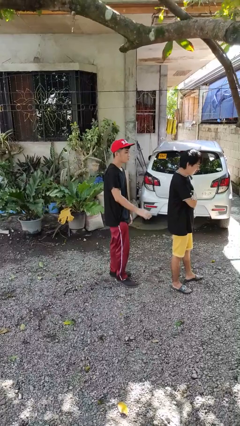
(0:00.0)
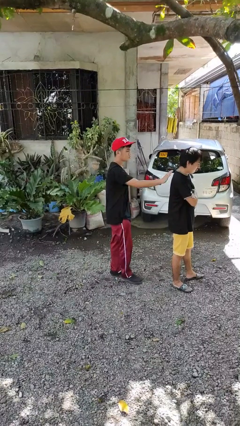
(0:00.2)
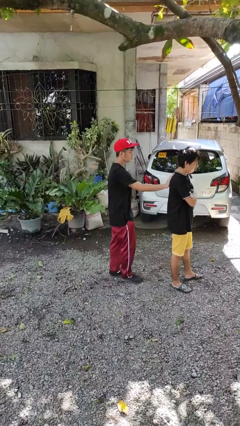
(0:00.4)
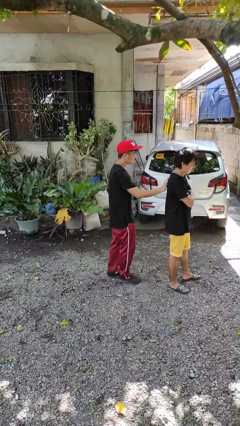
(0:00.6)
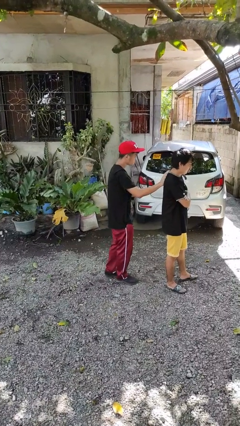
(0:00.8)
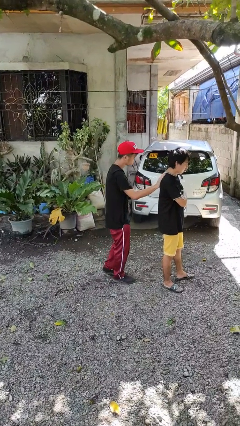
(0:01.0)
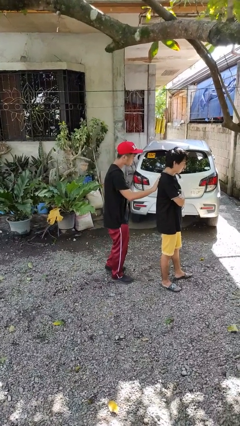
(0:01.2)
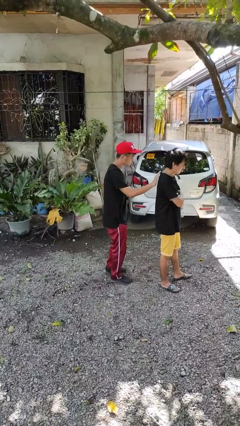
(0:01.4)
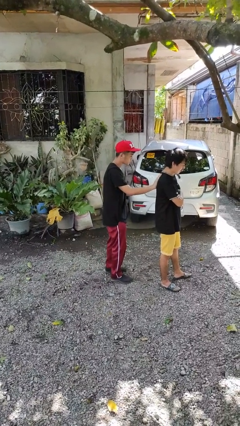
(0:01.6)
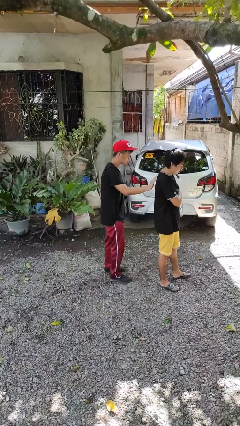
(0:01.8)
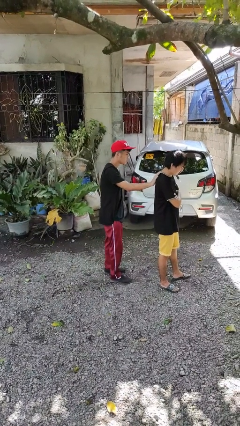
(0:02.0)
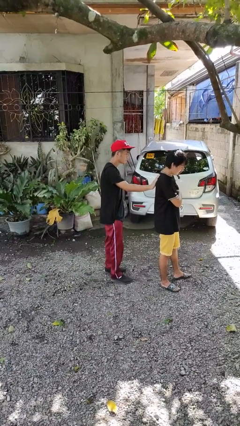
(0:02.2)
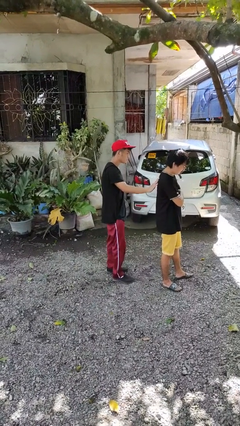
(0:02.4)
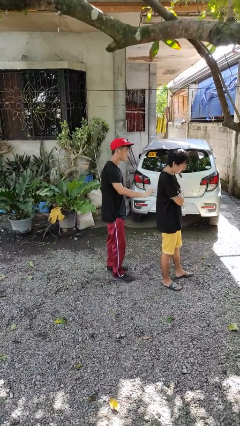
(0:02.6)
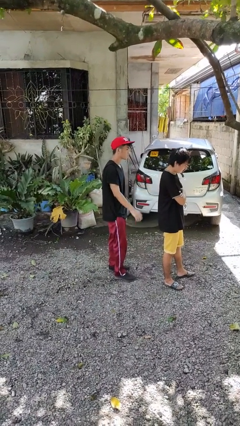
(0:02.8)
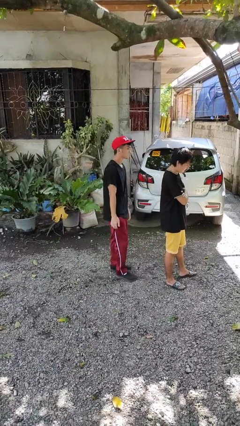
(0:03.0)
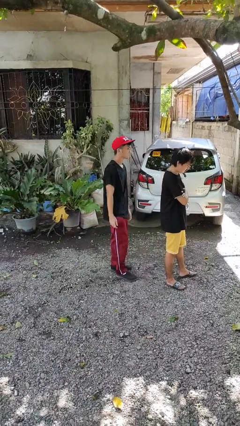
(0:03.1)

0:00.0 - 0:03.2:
person touches back of person

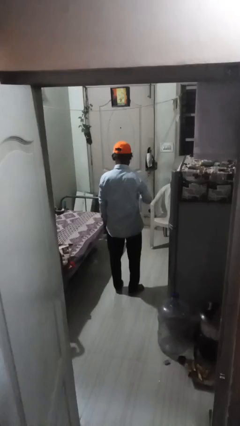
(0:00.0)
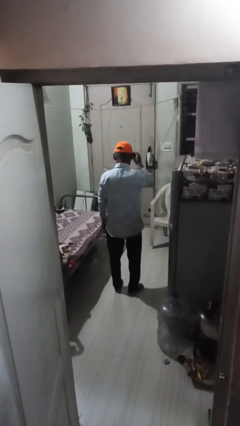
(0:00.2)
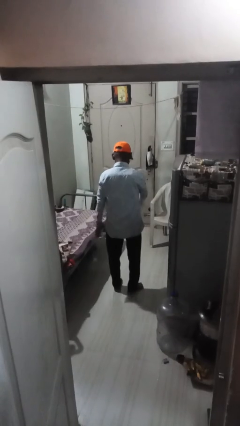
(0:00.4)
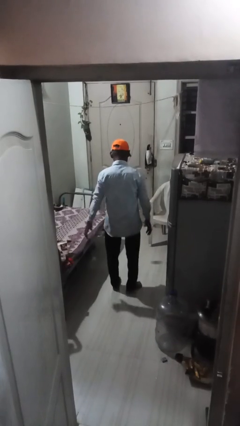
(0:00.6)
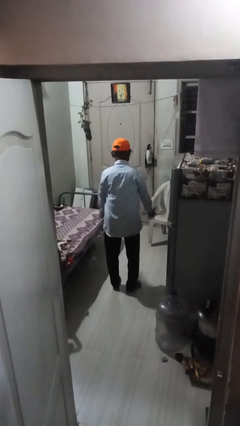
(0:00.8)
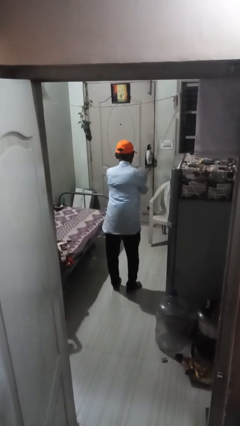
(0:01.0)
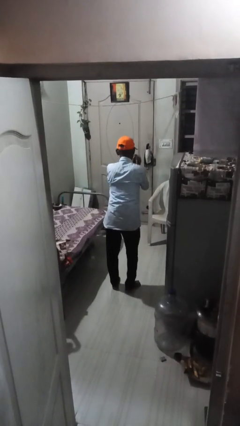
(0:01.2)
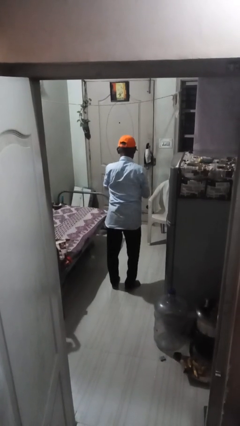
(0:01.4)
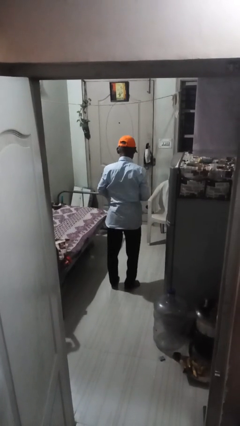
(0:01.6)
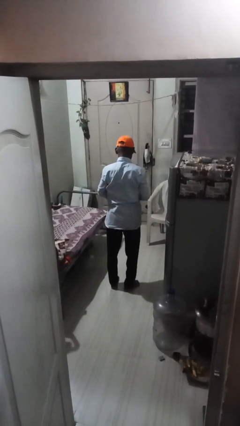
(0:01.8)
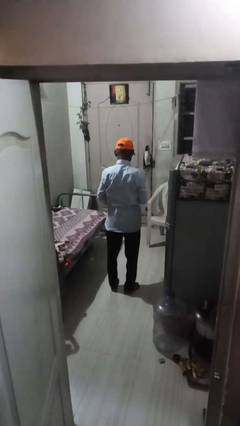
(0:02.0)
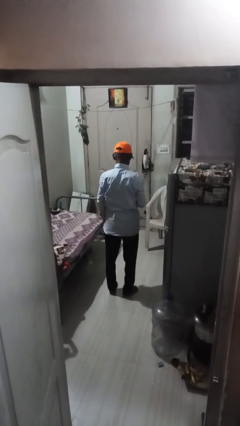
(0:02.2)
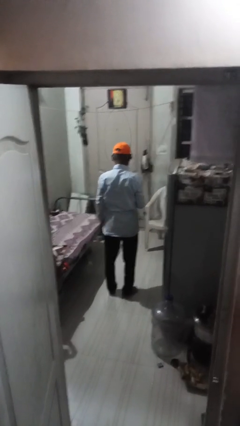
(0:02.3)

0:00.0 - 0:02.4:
person bounces ball on floor

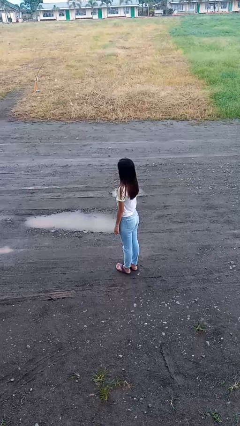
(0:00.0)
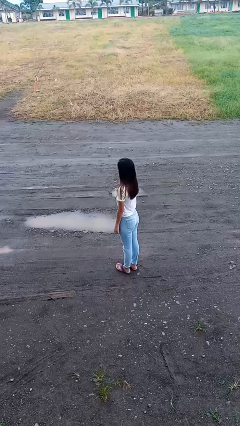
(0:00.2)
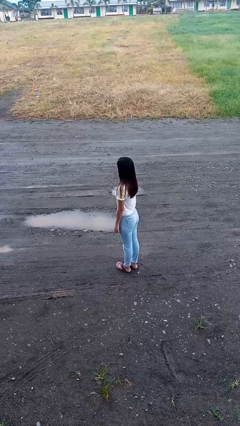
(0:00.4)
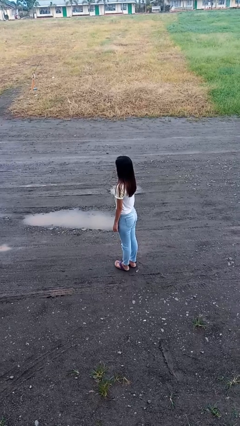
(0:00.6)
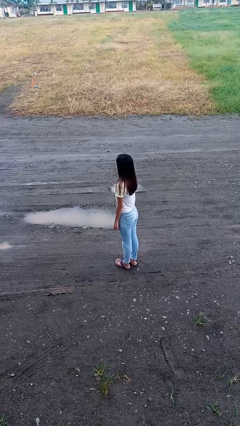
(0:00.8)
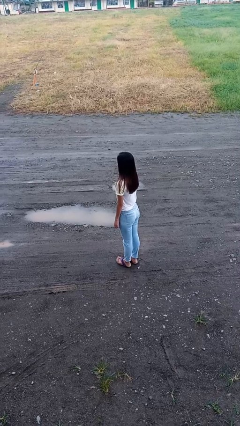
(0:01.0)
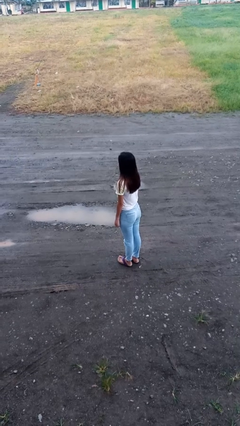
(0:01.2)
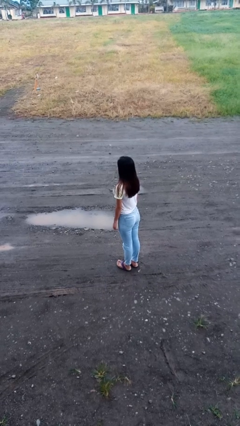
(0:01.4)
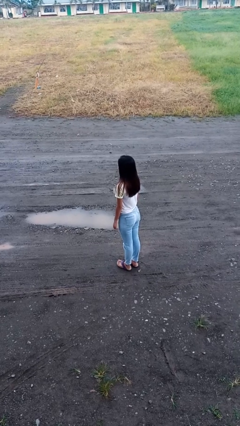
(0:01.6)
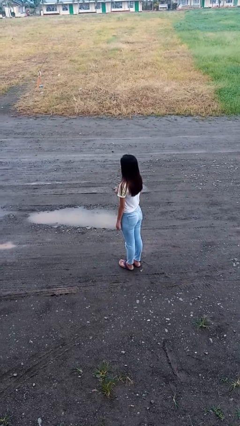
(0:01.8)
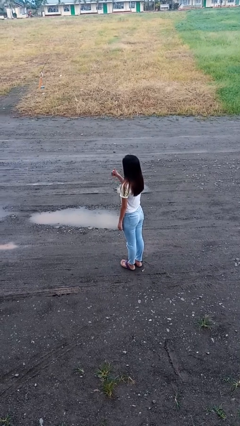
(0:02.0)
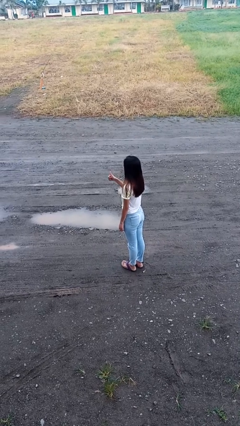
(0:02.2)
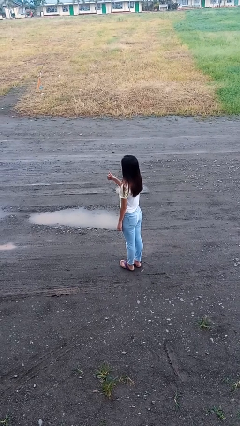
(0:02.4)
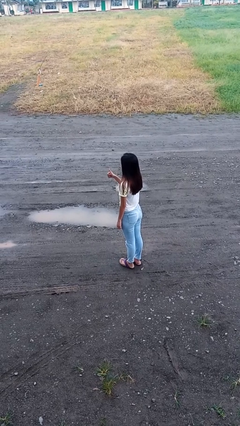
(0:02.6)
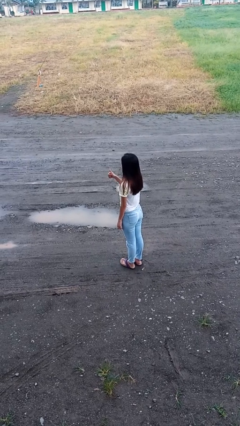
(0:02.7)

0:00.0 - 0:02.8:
person gestures thumbs up

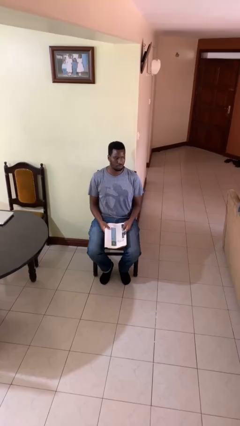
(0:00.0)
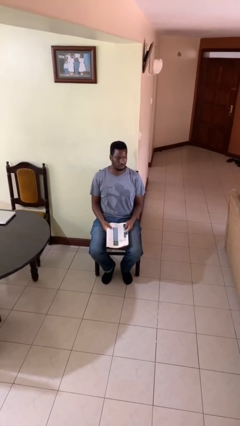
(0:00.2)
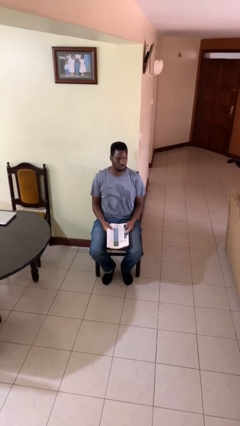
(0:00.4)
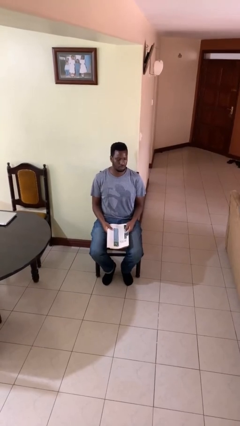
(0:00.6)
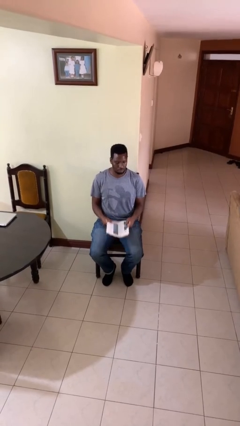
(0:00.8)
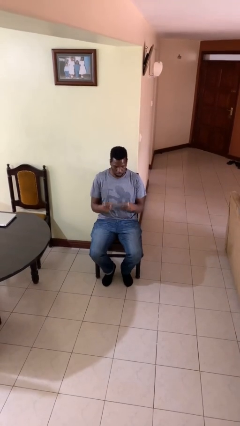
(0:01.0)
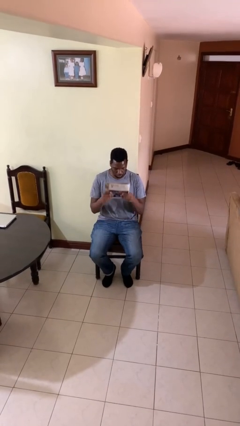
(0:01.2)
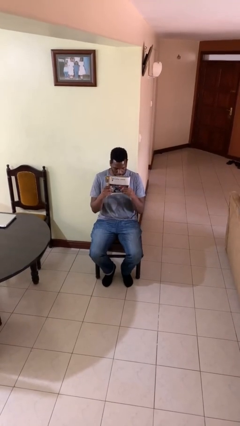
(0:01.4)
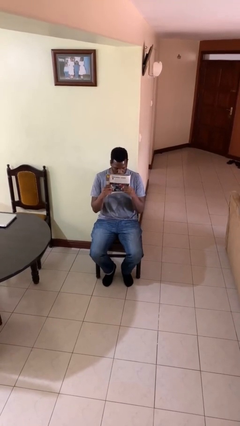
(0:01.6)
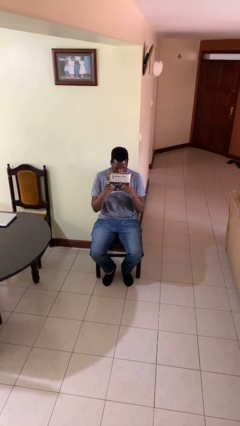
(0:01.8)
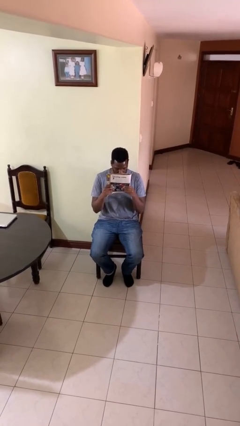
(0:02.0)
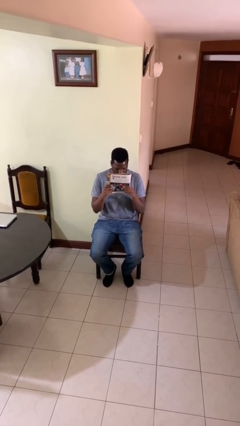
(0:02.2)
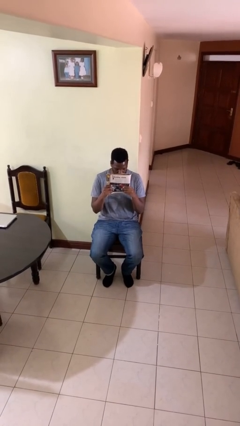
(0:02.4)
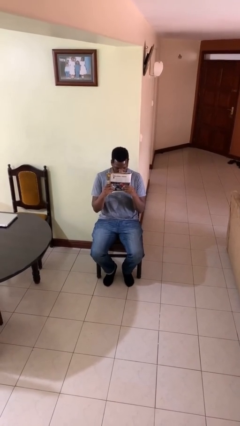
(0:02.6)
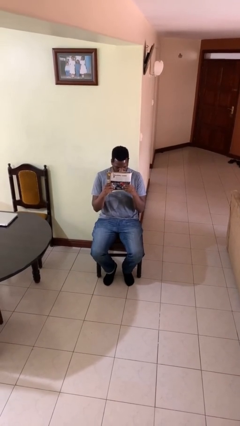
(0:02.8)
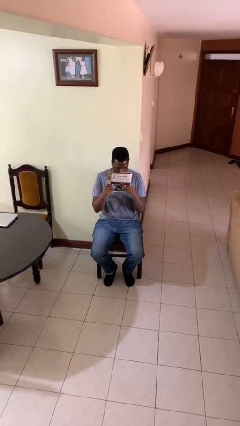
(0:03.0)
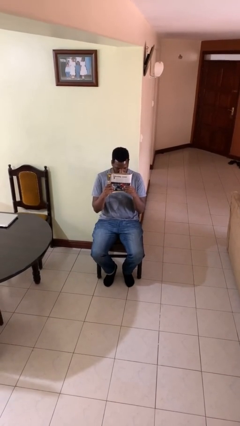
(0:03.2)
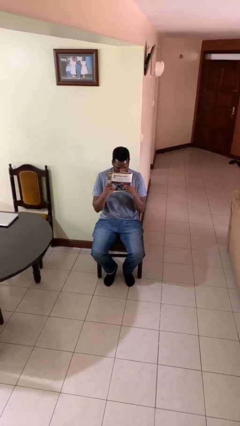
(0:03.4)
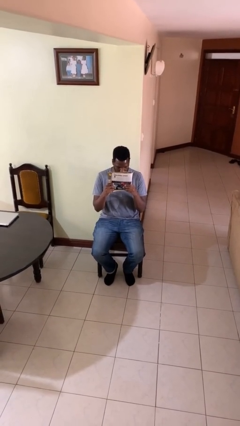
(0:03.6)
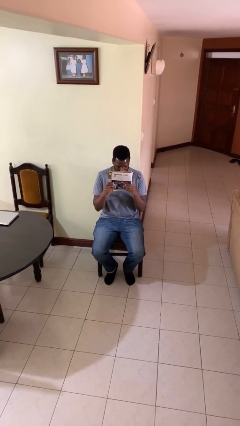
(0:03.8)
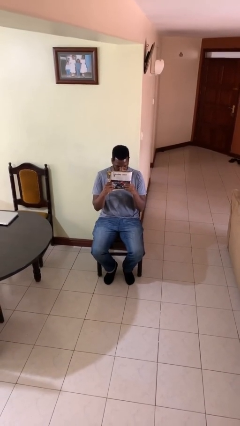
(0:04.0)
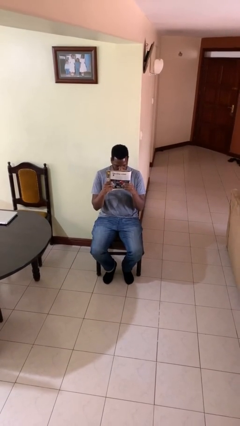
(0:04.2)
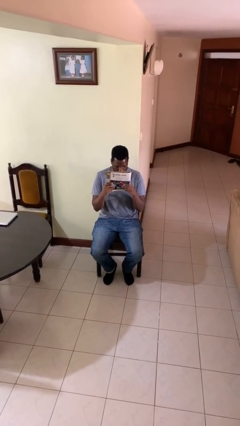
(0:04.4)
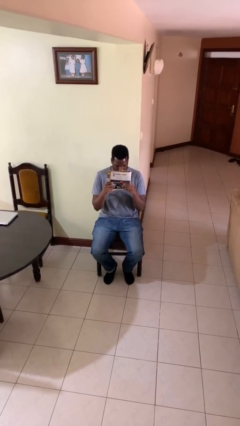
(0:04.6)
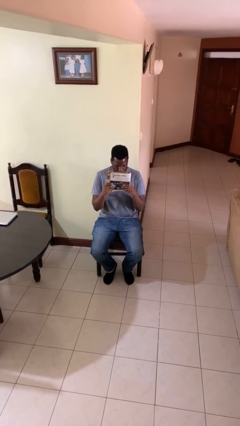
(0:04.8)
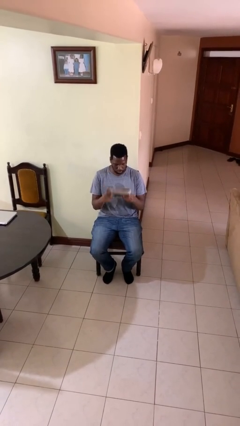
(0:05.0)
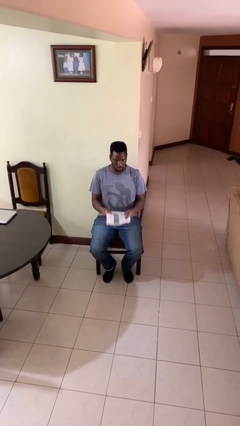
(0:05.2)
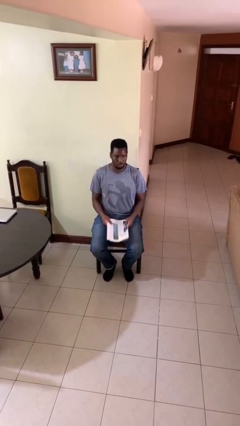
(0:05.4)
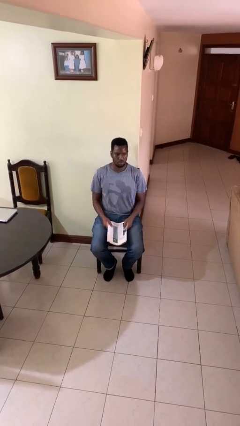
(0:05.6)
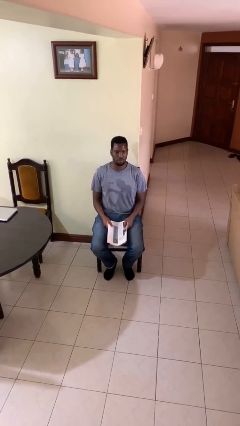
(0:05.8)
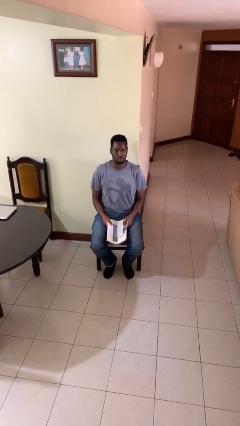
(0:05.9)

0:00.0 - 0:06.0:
person reads document

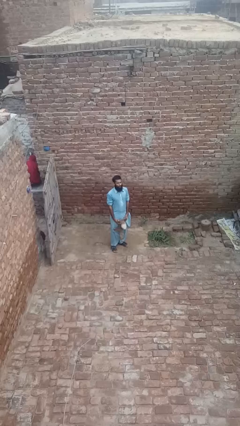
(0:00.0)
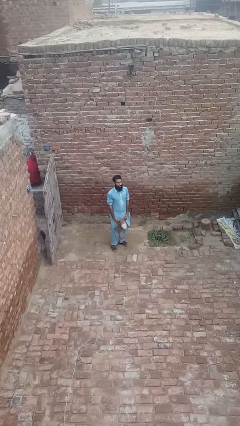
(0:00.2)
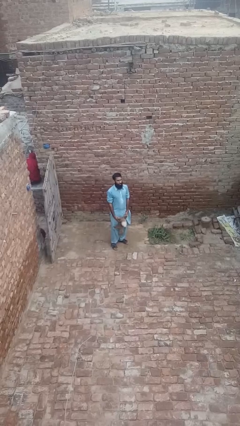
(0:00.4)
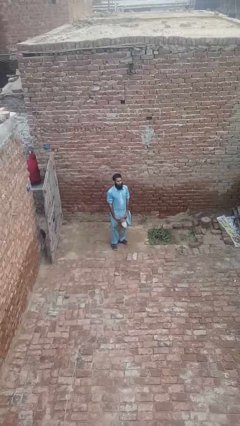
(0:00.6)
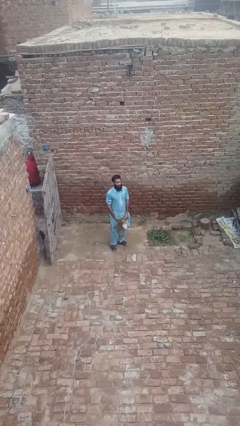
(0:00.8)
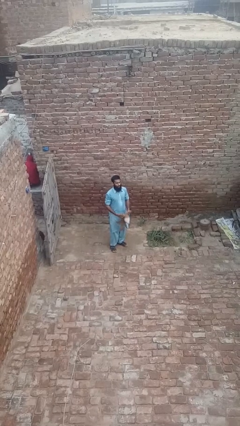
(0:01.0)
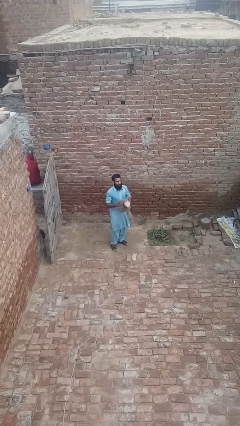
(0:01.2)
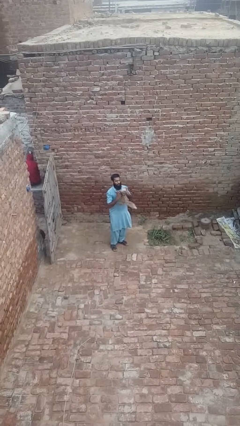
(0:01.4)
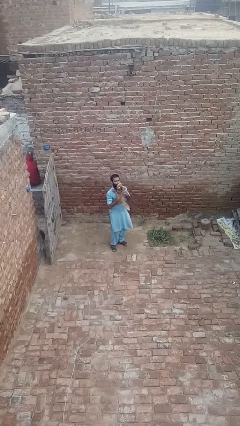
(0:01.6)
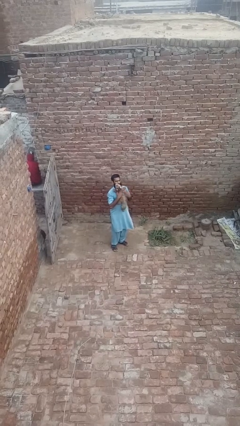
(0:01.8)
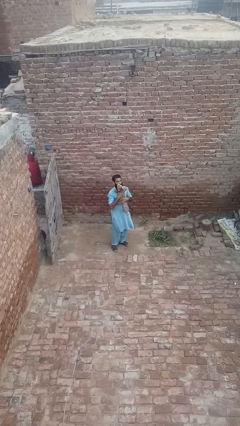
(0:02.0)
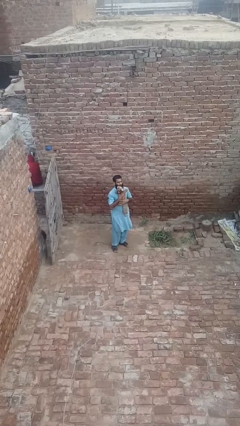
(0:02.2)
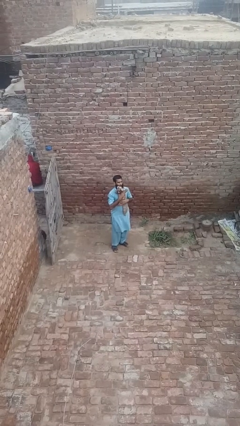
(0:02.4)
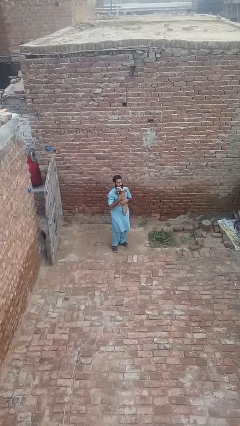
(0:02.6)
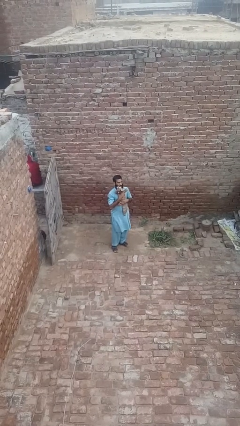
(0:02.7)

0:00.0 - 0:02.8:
person hugs stuffed animal

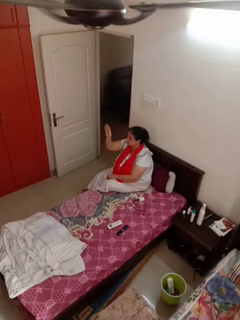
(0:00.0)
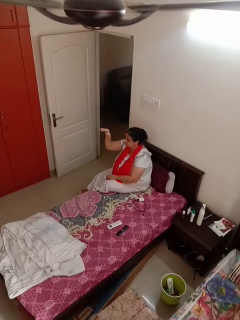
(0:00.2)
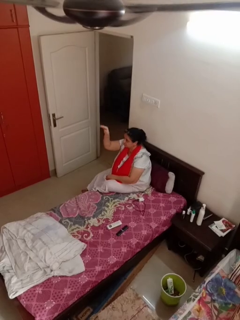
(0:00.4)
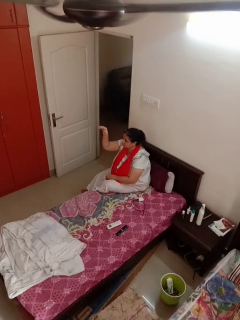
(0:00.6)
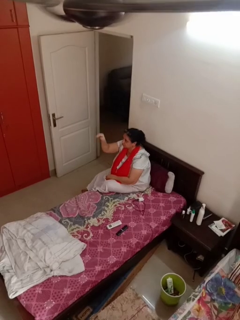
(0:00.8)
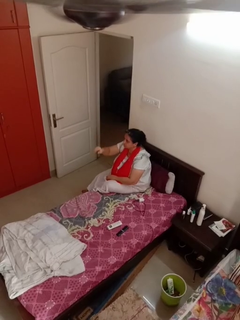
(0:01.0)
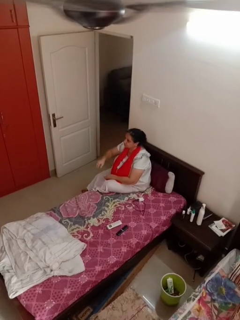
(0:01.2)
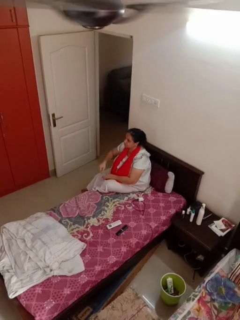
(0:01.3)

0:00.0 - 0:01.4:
person gestures come here
